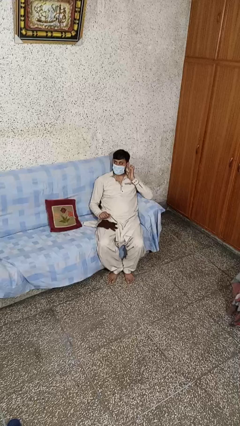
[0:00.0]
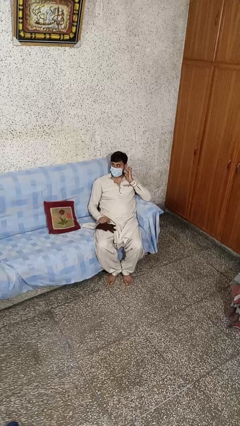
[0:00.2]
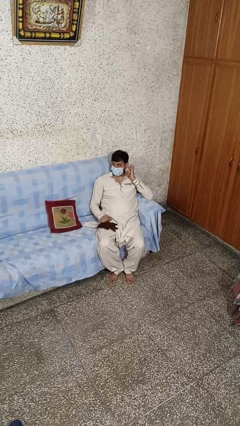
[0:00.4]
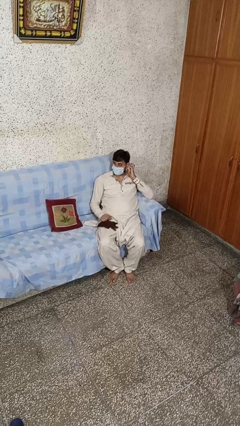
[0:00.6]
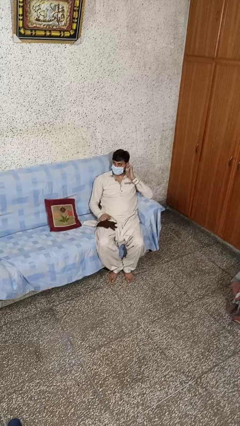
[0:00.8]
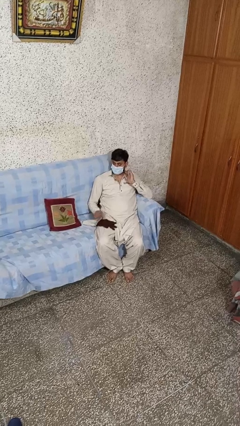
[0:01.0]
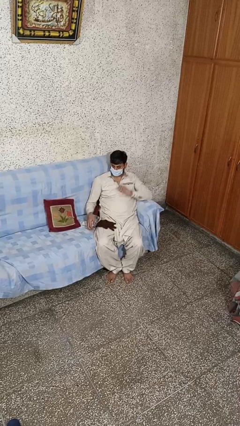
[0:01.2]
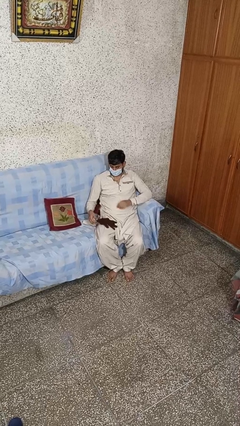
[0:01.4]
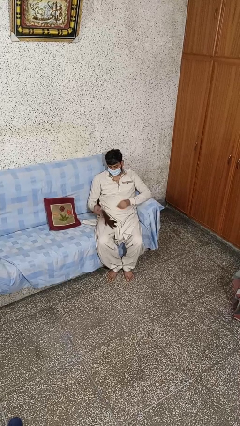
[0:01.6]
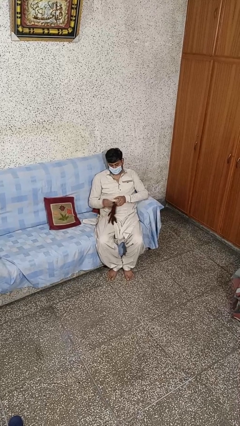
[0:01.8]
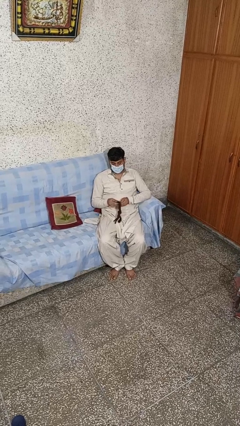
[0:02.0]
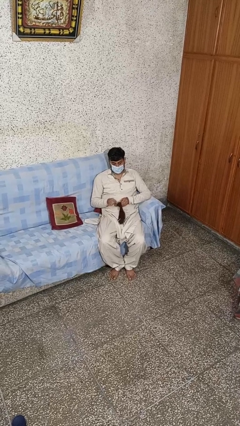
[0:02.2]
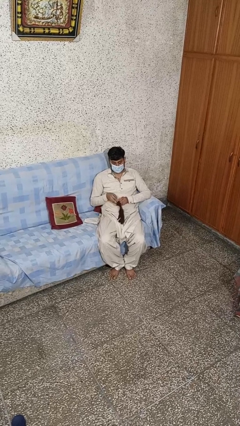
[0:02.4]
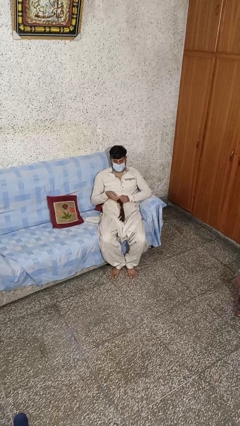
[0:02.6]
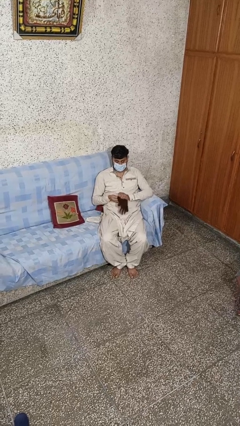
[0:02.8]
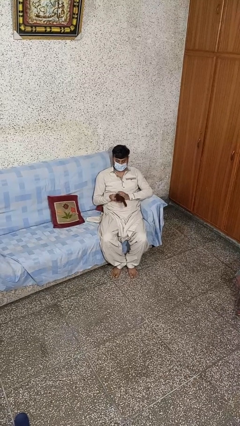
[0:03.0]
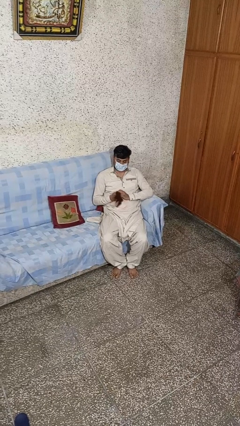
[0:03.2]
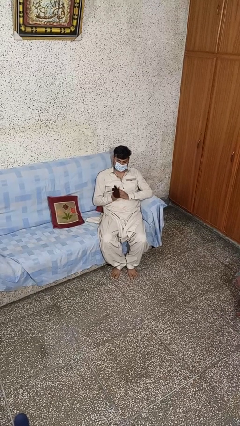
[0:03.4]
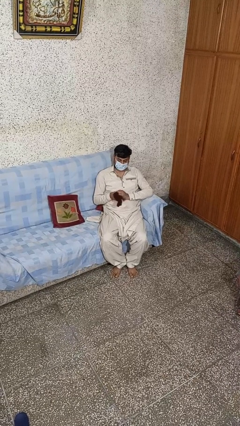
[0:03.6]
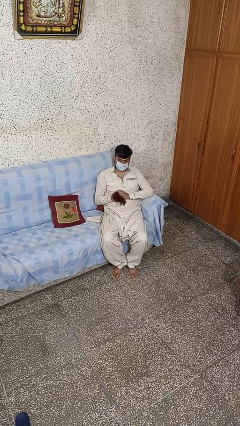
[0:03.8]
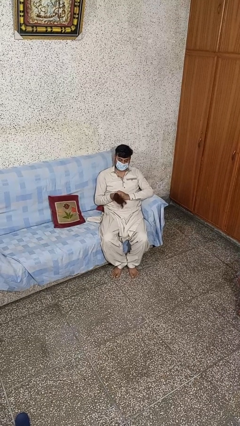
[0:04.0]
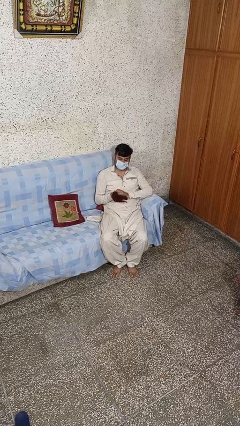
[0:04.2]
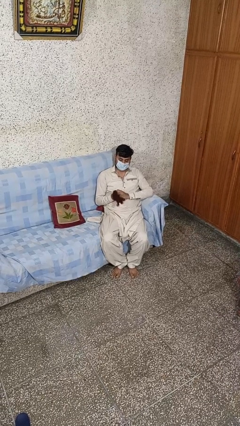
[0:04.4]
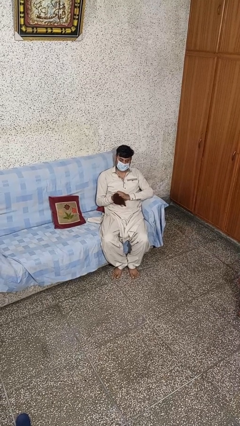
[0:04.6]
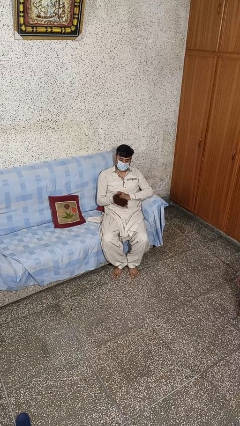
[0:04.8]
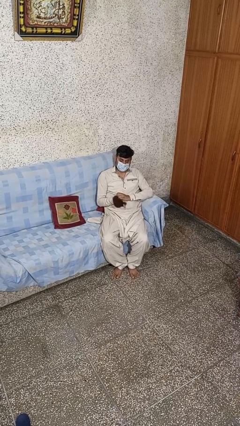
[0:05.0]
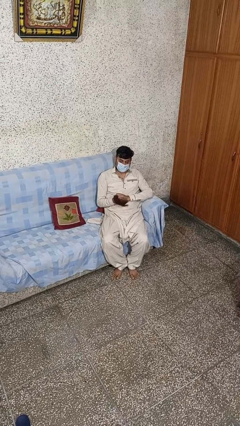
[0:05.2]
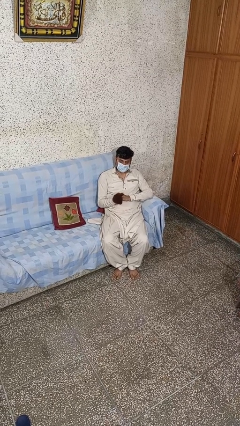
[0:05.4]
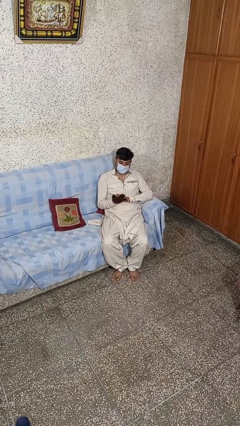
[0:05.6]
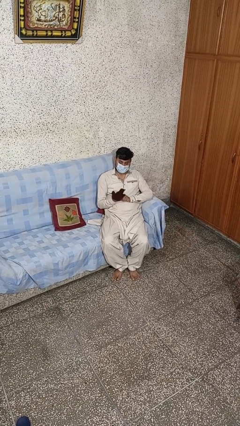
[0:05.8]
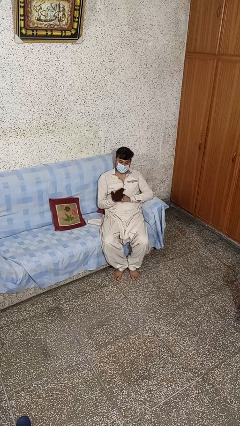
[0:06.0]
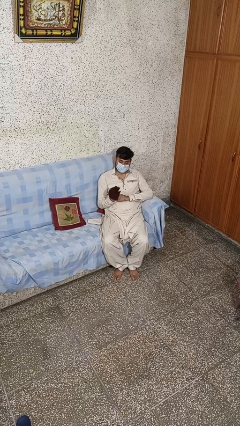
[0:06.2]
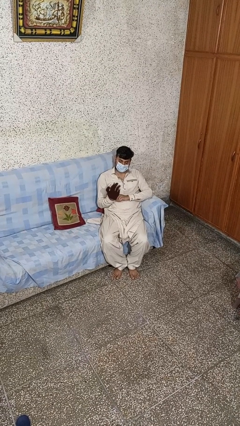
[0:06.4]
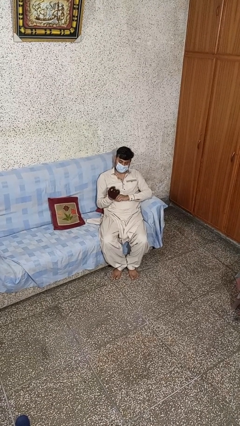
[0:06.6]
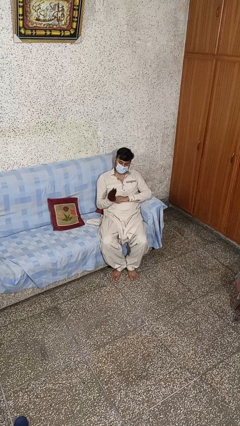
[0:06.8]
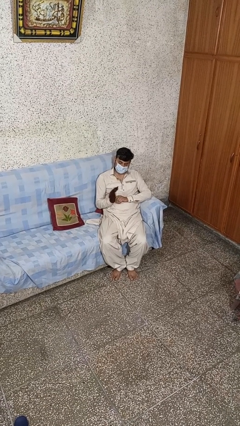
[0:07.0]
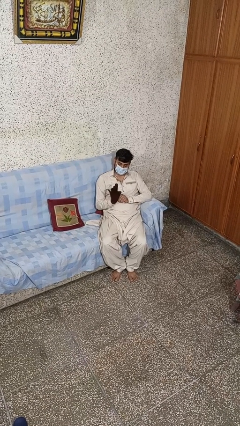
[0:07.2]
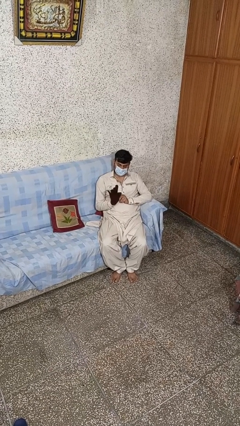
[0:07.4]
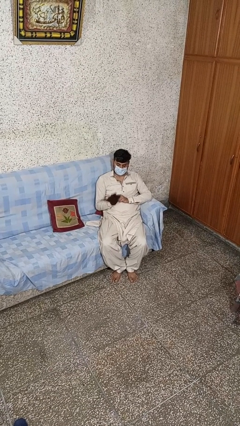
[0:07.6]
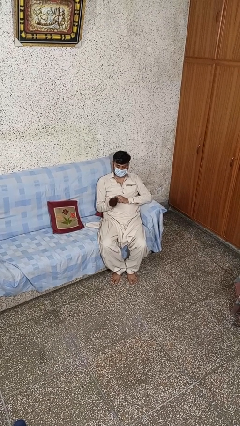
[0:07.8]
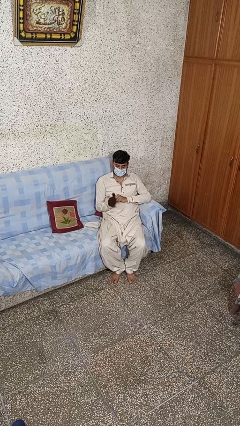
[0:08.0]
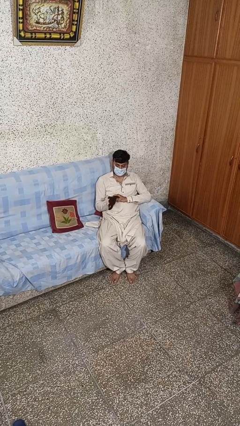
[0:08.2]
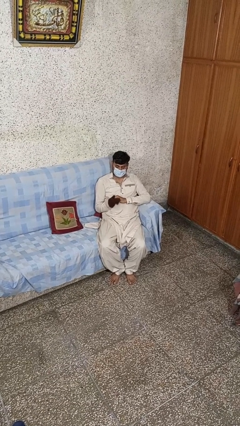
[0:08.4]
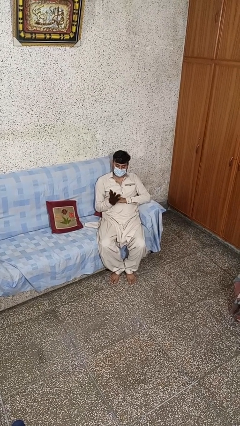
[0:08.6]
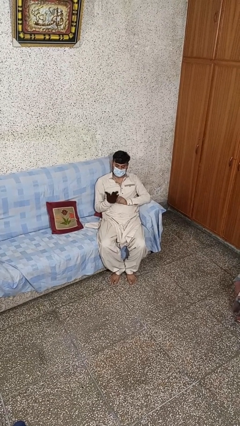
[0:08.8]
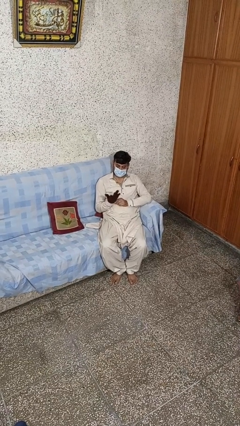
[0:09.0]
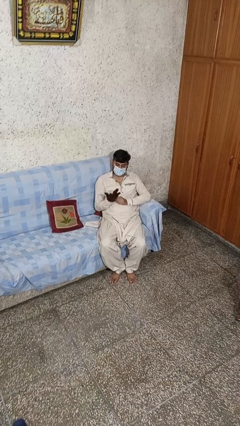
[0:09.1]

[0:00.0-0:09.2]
person puts on gloves

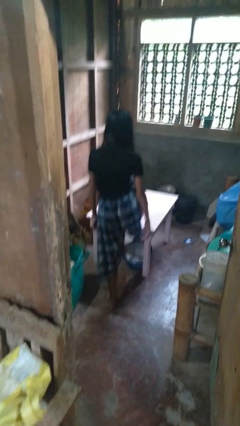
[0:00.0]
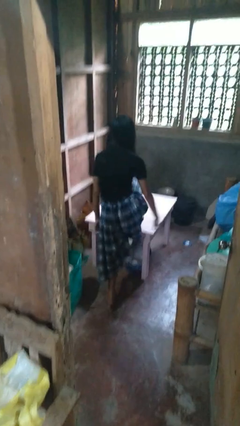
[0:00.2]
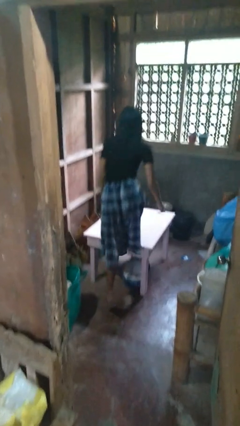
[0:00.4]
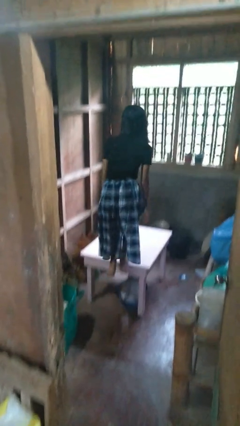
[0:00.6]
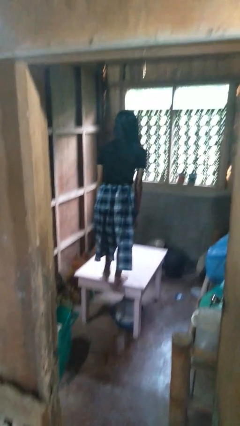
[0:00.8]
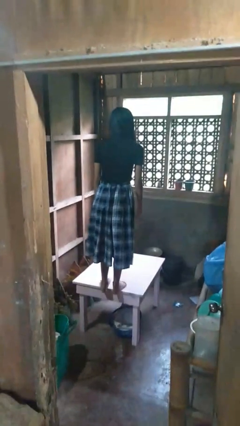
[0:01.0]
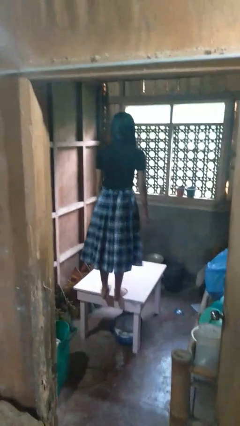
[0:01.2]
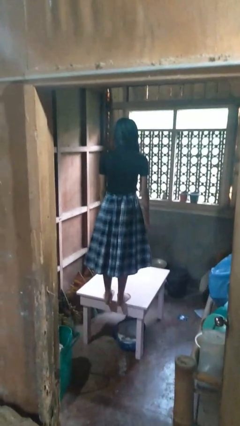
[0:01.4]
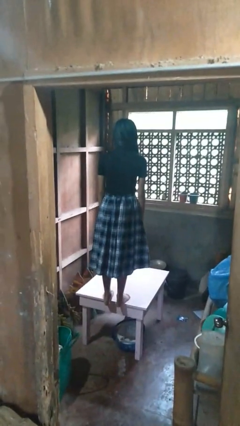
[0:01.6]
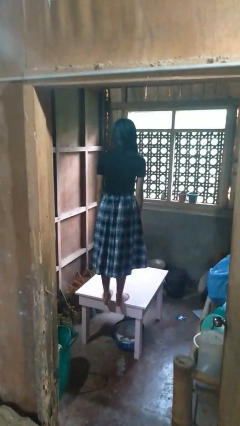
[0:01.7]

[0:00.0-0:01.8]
person climbs on table

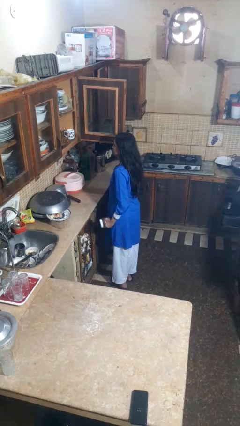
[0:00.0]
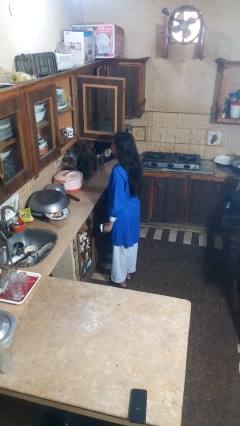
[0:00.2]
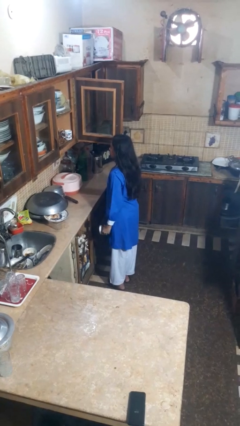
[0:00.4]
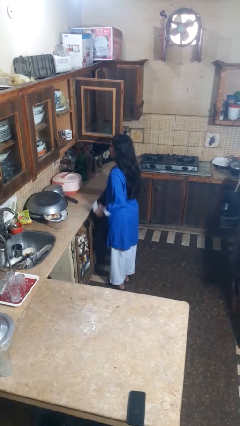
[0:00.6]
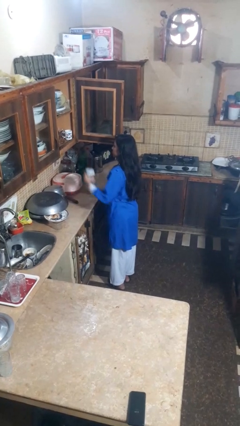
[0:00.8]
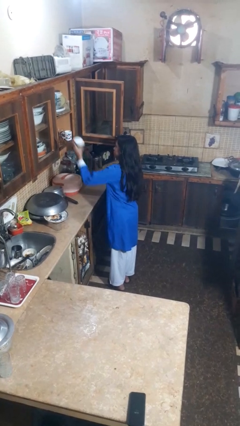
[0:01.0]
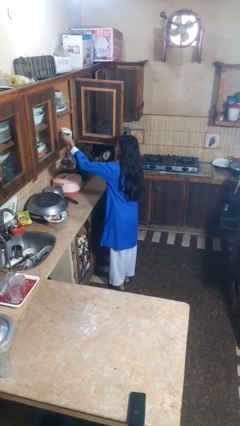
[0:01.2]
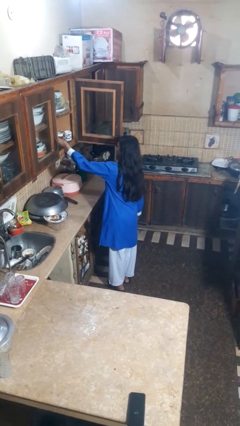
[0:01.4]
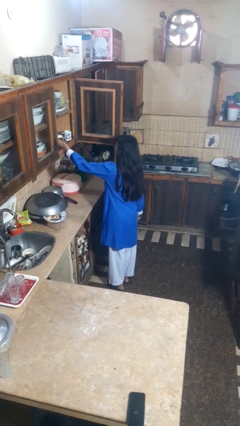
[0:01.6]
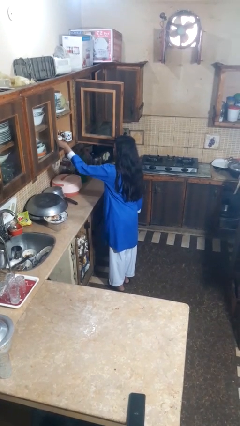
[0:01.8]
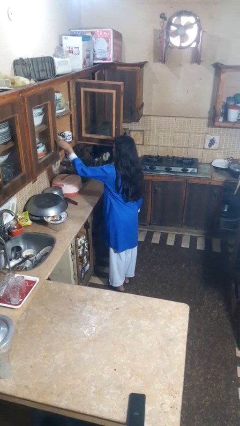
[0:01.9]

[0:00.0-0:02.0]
person puts object in cabinet

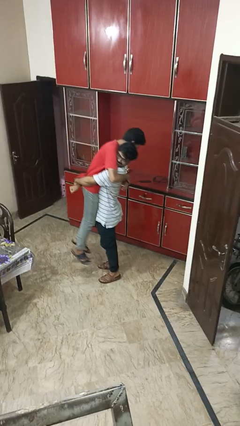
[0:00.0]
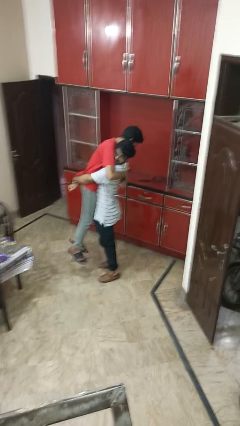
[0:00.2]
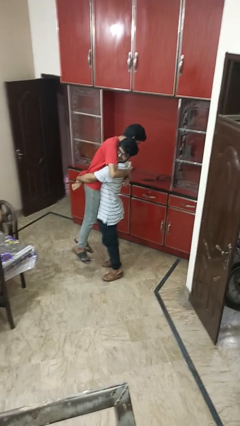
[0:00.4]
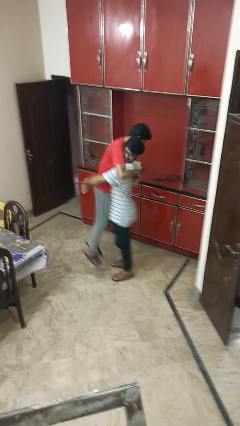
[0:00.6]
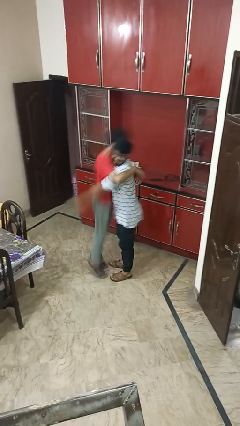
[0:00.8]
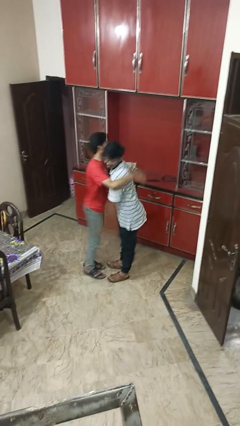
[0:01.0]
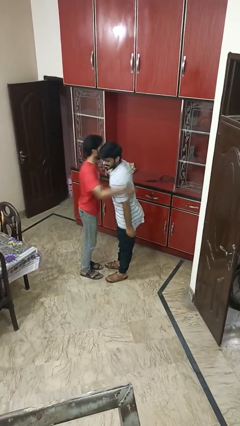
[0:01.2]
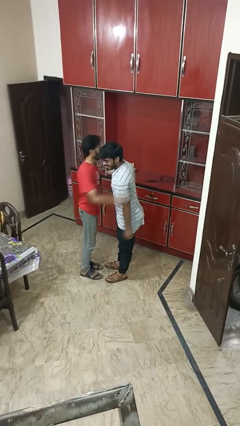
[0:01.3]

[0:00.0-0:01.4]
person puts down person

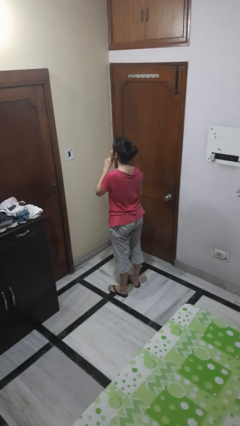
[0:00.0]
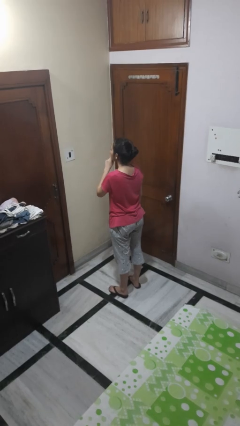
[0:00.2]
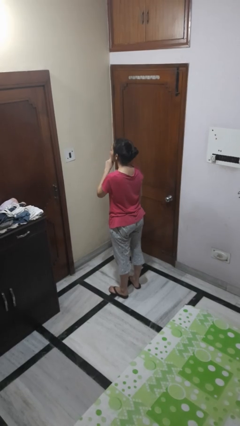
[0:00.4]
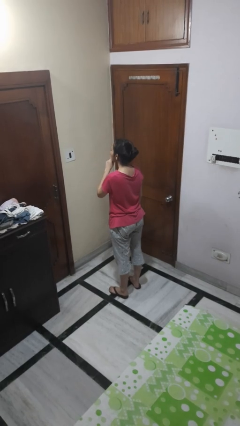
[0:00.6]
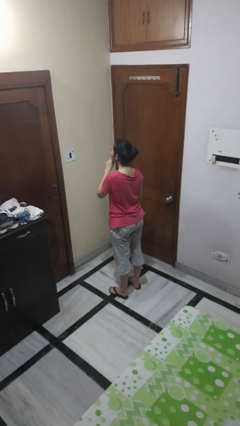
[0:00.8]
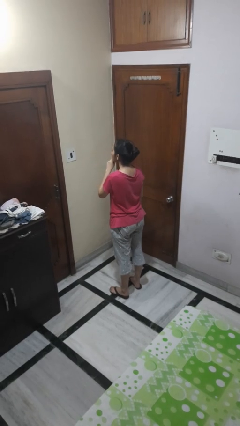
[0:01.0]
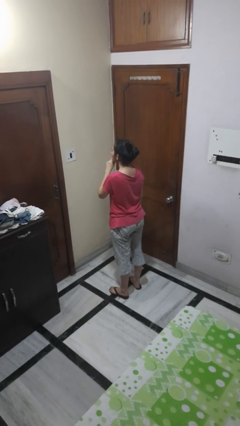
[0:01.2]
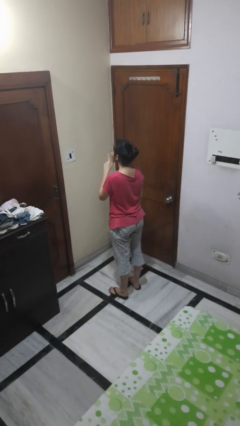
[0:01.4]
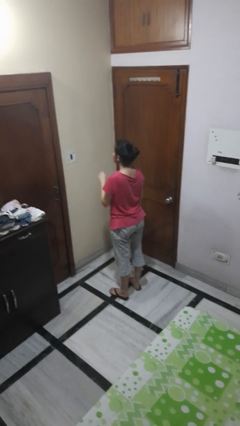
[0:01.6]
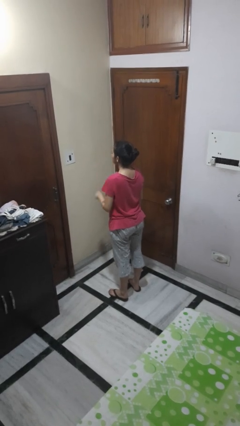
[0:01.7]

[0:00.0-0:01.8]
person gestures be quiet

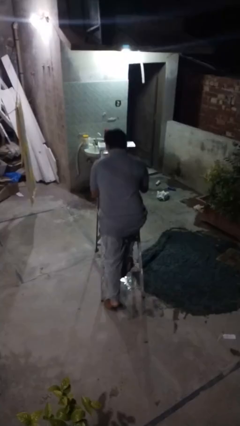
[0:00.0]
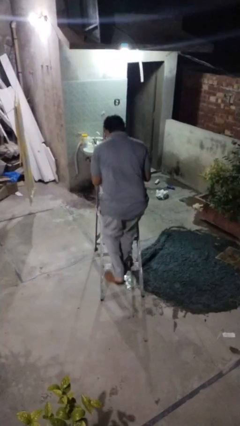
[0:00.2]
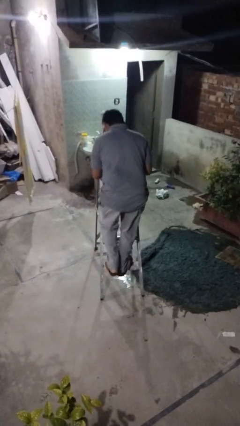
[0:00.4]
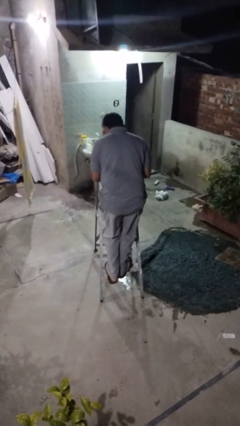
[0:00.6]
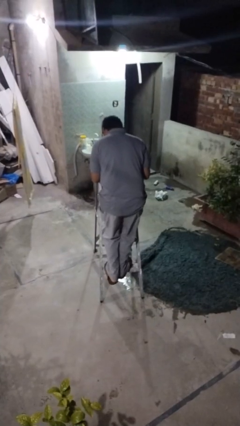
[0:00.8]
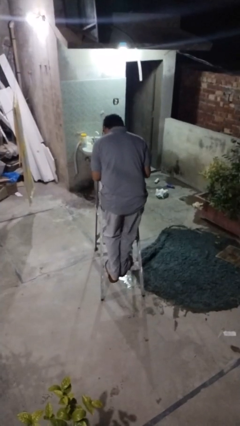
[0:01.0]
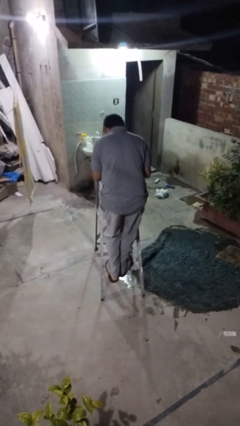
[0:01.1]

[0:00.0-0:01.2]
person climbs up ladder
